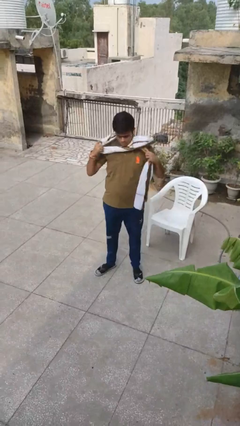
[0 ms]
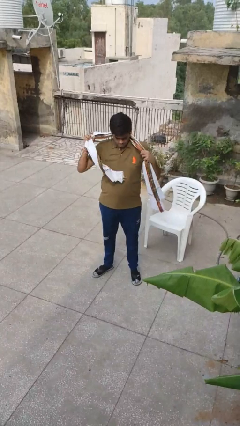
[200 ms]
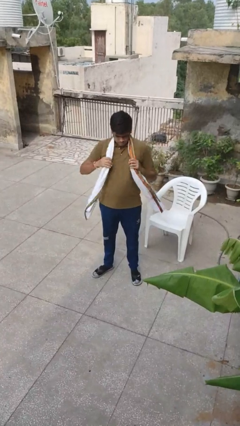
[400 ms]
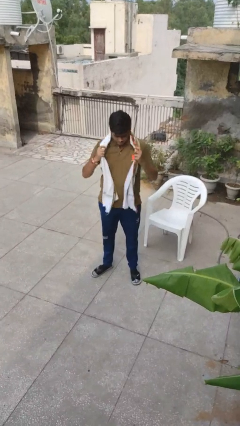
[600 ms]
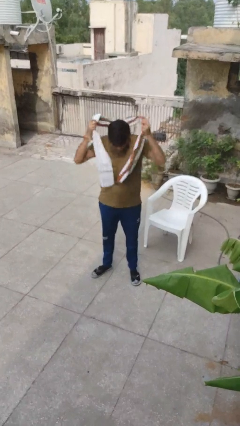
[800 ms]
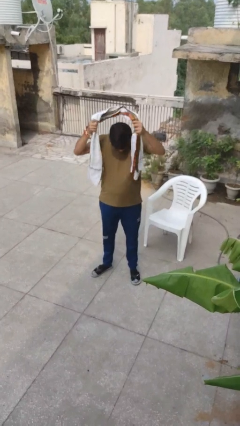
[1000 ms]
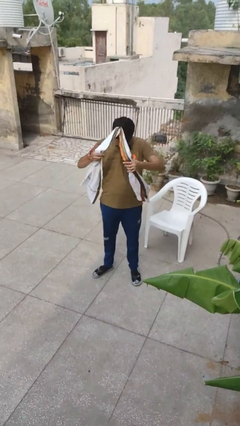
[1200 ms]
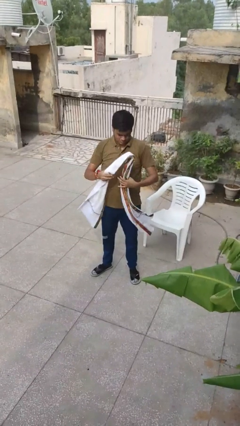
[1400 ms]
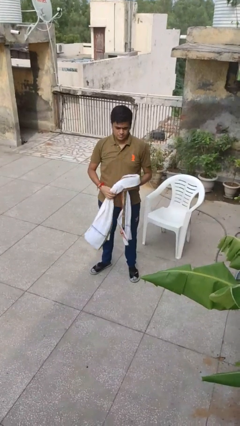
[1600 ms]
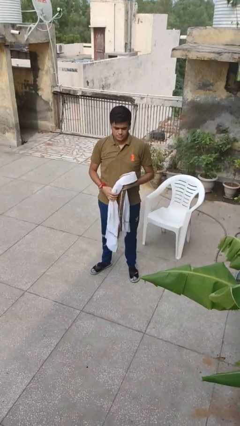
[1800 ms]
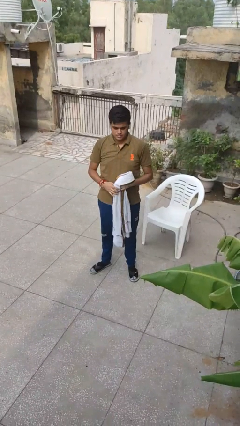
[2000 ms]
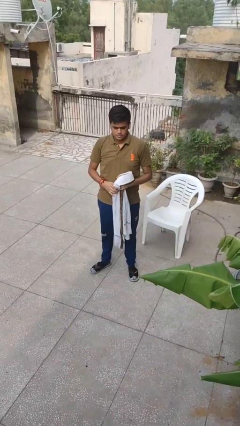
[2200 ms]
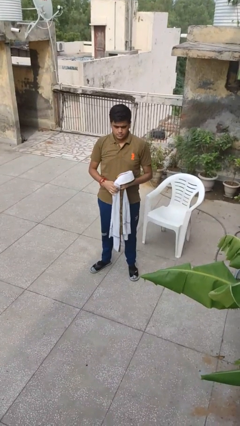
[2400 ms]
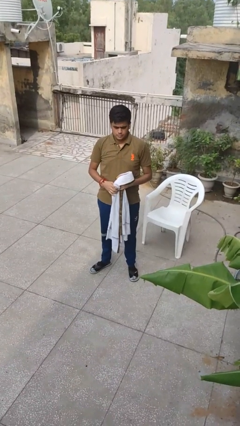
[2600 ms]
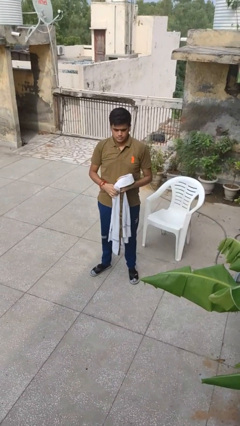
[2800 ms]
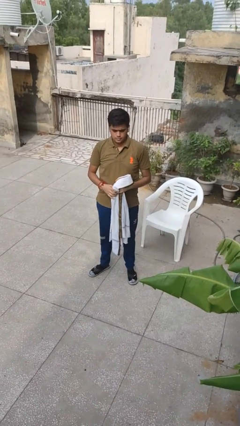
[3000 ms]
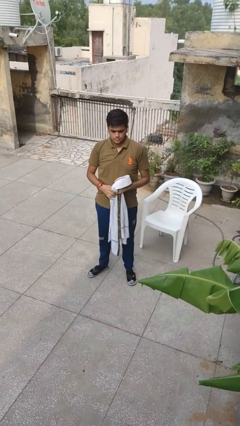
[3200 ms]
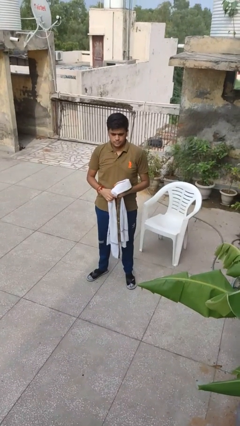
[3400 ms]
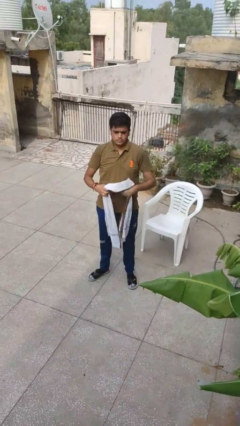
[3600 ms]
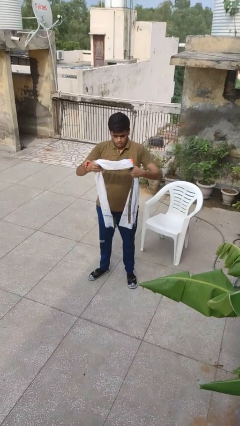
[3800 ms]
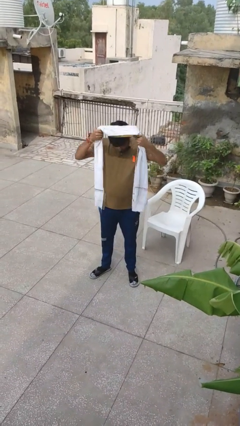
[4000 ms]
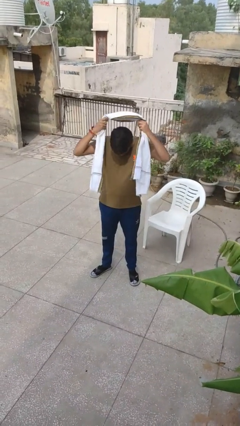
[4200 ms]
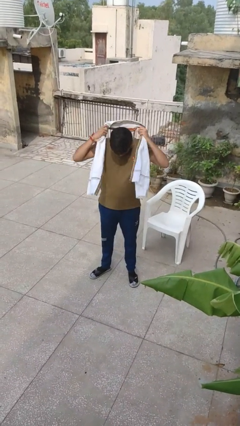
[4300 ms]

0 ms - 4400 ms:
person takes off scarf

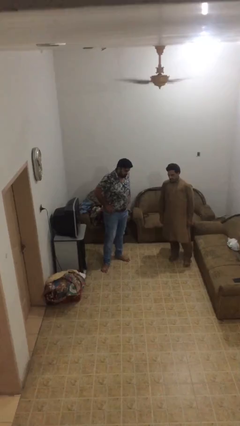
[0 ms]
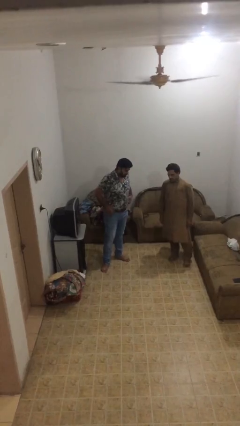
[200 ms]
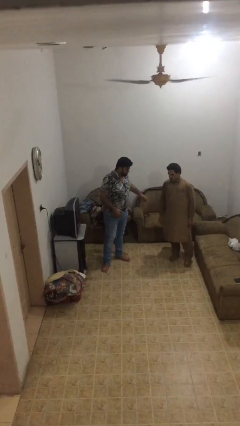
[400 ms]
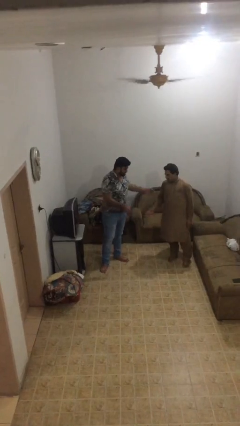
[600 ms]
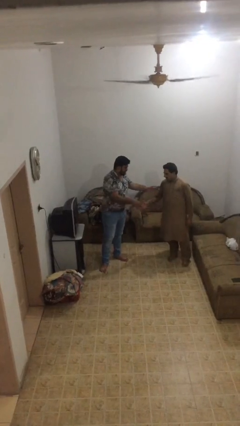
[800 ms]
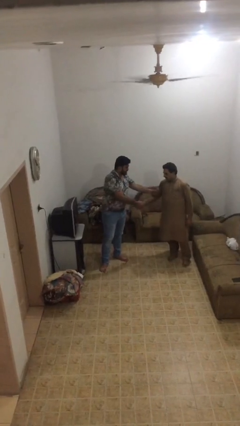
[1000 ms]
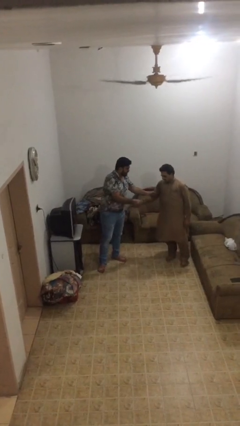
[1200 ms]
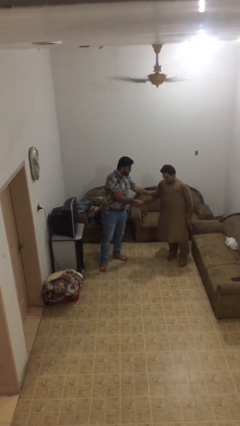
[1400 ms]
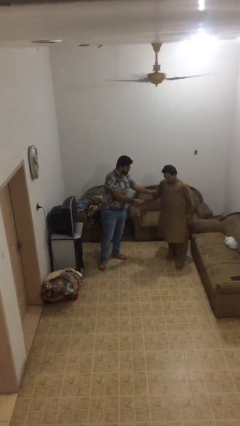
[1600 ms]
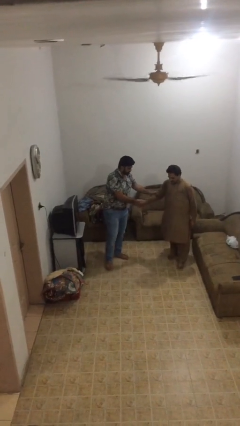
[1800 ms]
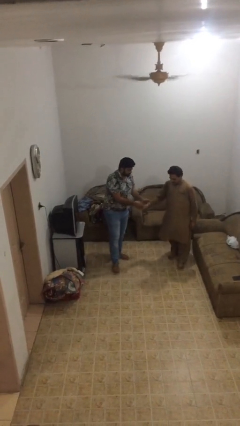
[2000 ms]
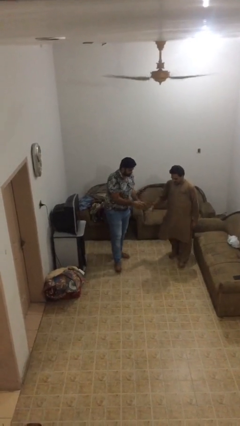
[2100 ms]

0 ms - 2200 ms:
person shakes hand

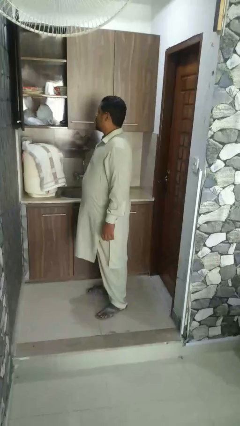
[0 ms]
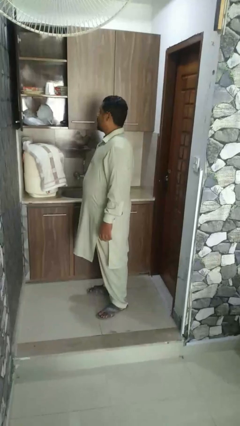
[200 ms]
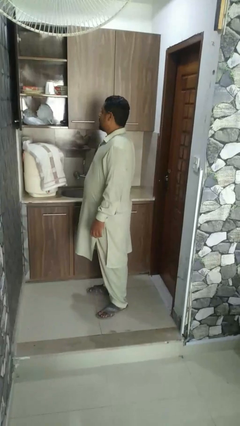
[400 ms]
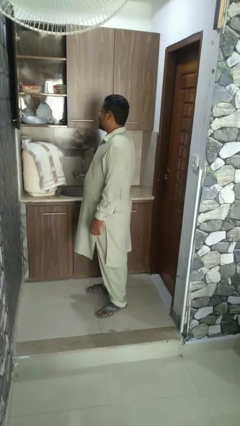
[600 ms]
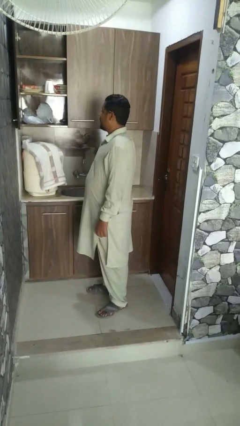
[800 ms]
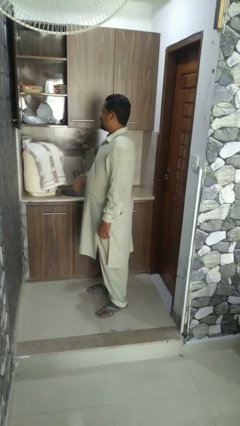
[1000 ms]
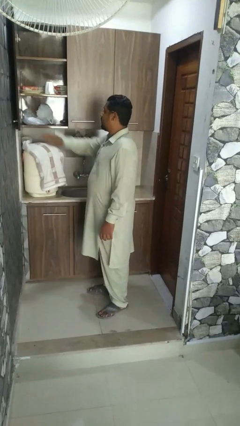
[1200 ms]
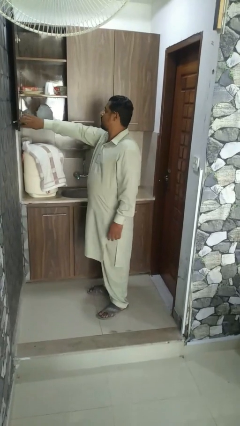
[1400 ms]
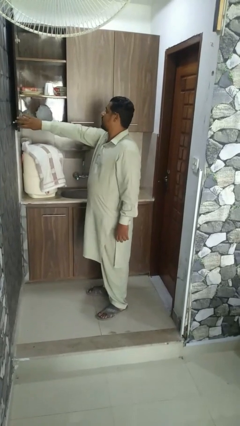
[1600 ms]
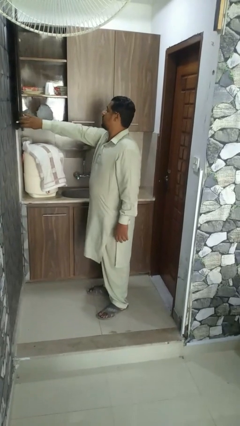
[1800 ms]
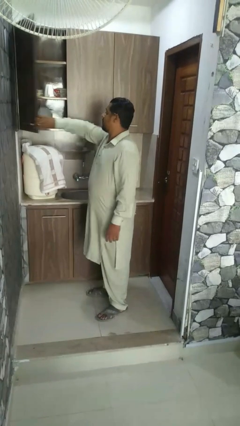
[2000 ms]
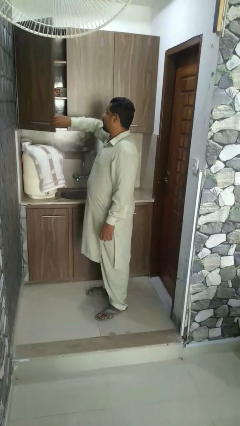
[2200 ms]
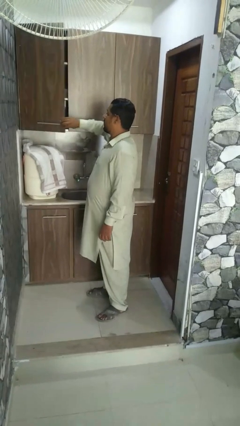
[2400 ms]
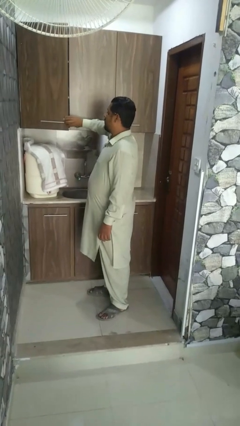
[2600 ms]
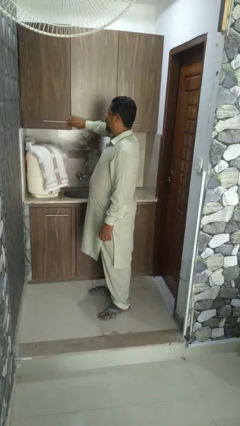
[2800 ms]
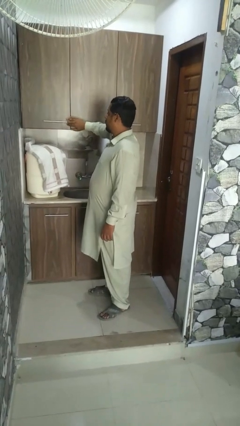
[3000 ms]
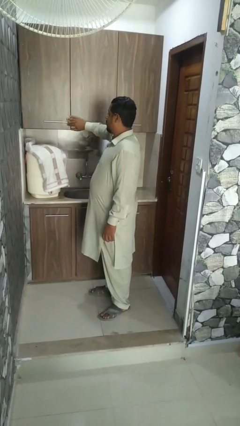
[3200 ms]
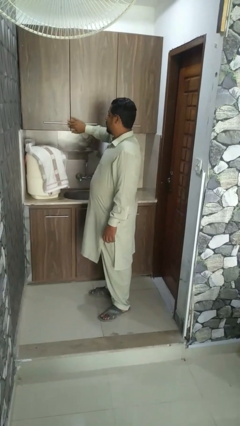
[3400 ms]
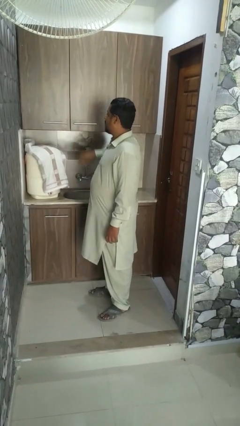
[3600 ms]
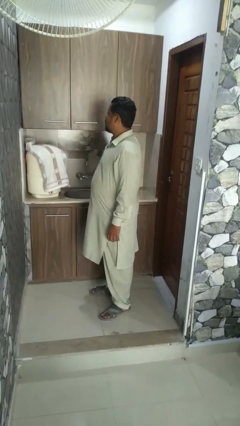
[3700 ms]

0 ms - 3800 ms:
person closes microwave

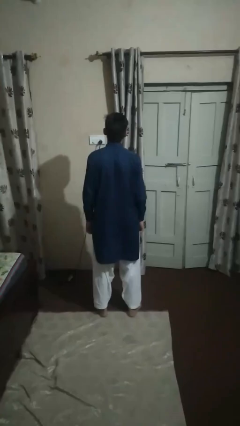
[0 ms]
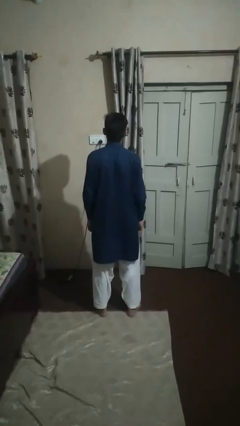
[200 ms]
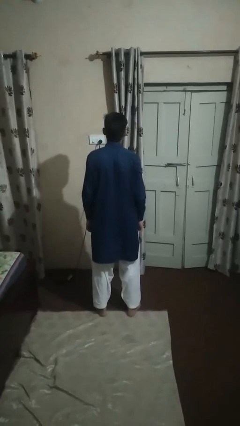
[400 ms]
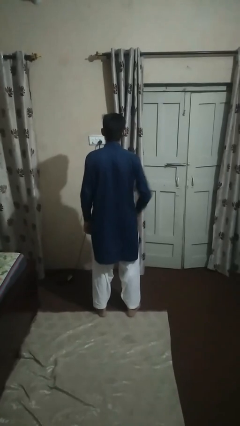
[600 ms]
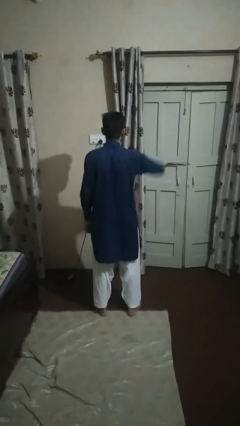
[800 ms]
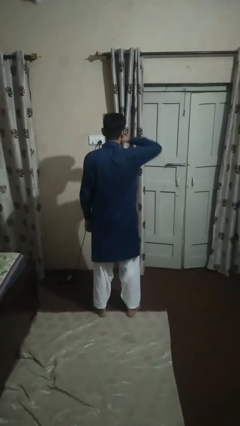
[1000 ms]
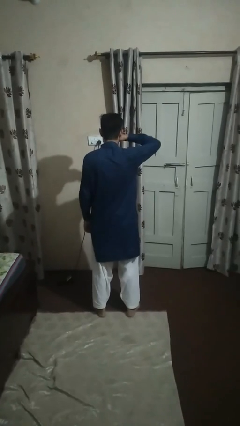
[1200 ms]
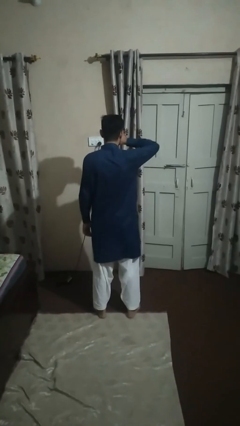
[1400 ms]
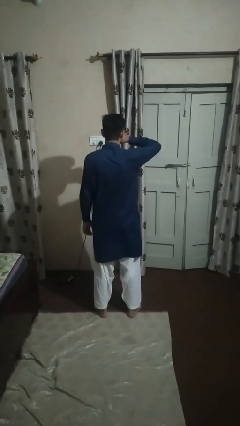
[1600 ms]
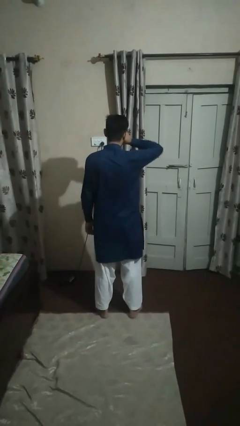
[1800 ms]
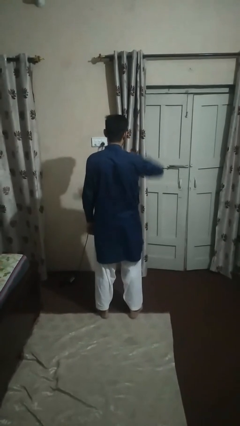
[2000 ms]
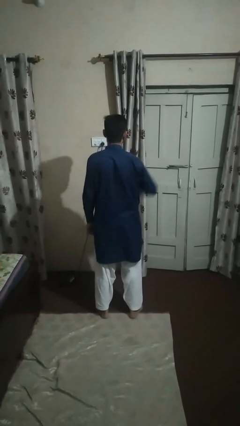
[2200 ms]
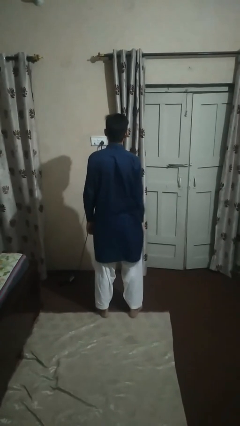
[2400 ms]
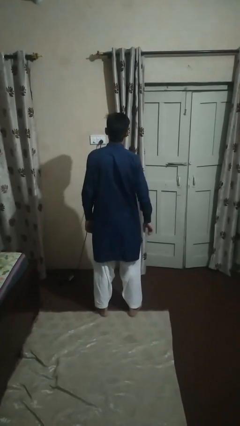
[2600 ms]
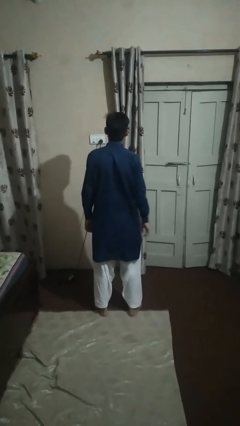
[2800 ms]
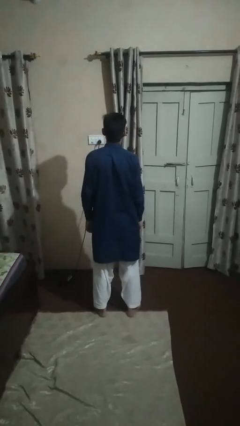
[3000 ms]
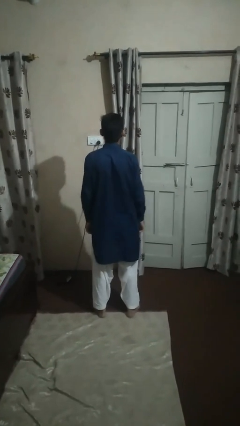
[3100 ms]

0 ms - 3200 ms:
person rubs eyes

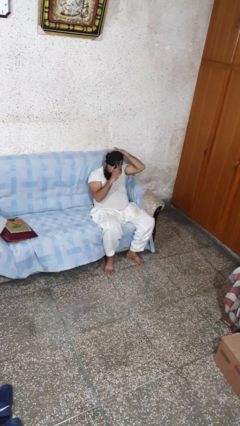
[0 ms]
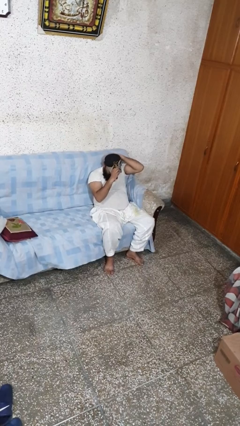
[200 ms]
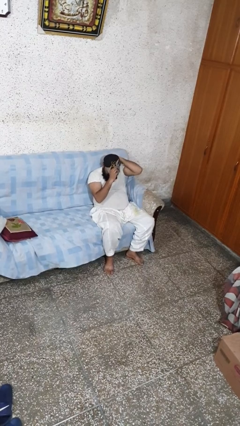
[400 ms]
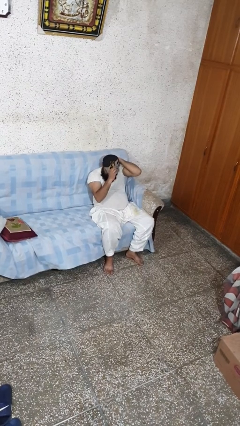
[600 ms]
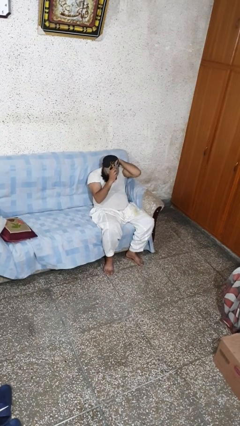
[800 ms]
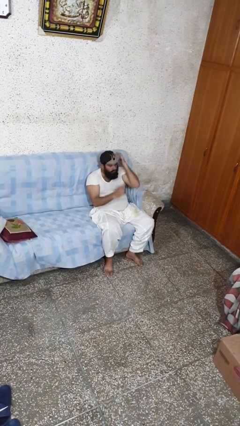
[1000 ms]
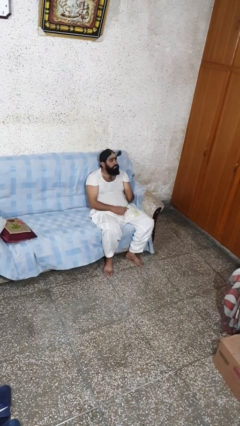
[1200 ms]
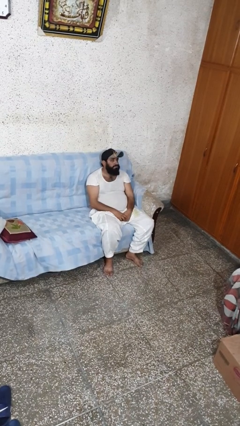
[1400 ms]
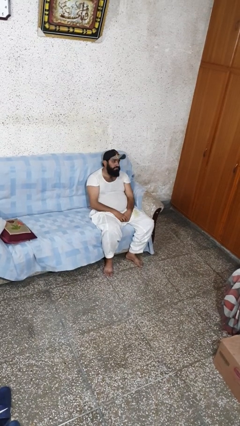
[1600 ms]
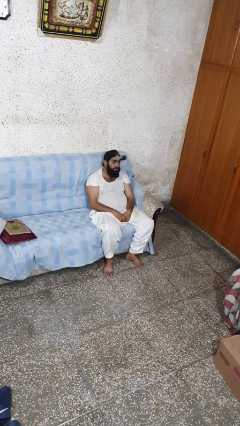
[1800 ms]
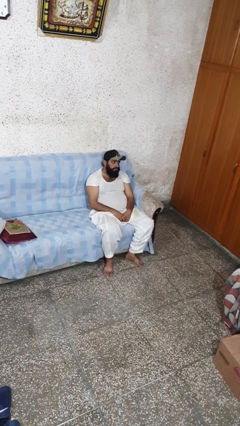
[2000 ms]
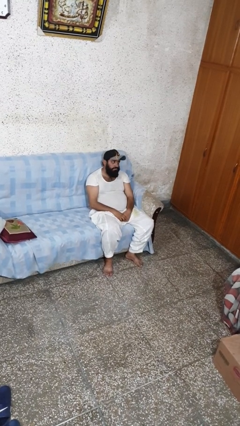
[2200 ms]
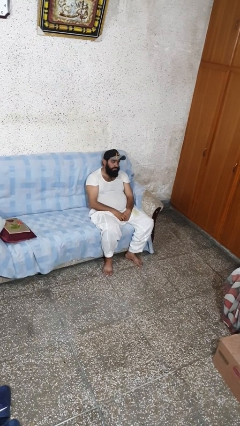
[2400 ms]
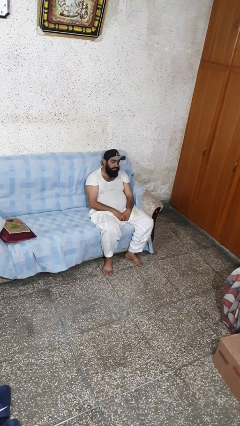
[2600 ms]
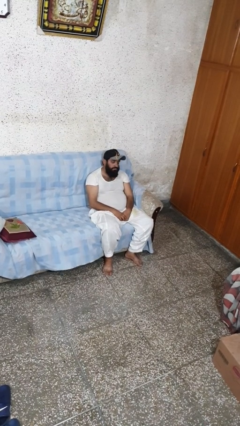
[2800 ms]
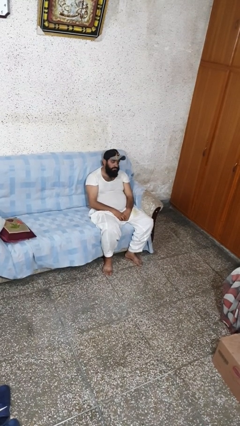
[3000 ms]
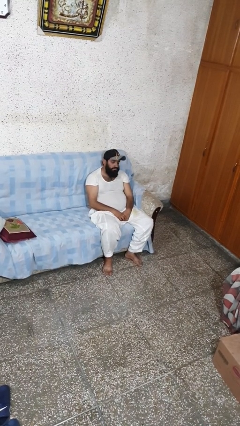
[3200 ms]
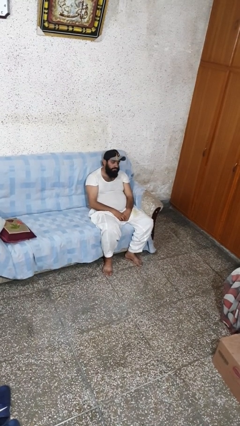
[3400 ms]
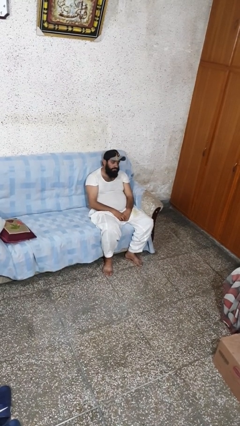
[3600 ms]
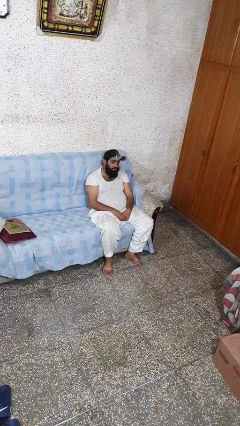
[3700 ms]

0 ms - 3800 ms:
person puts on hat
